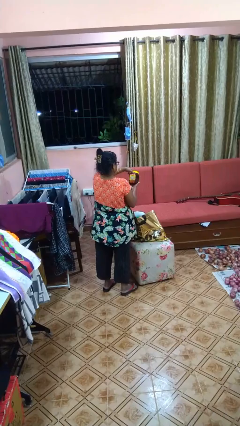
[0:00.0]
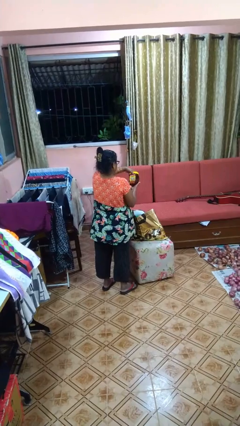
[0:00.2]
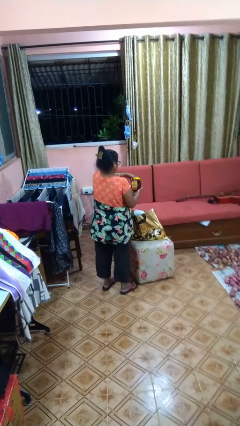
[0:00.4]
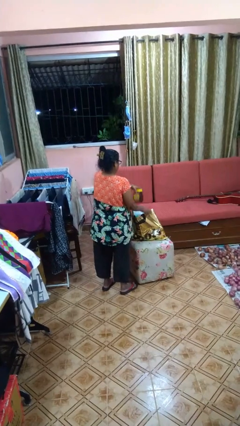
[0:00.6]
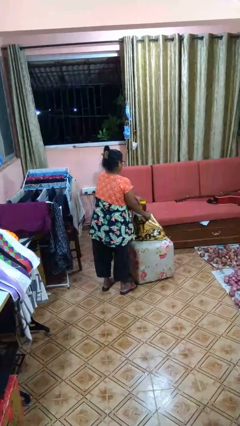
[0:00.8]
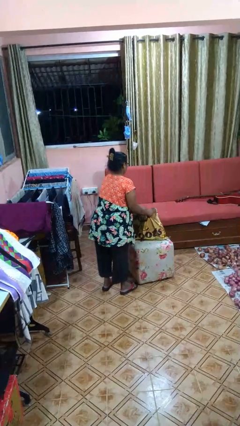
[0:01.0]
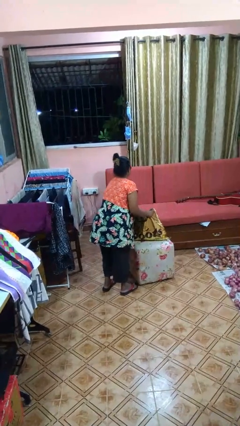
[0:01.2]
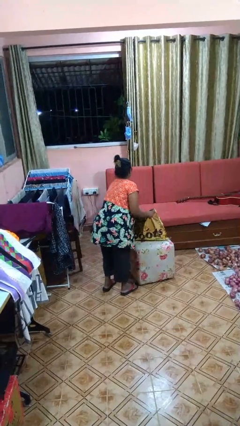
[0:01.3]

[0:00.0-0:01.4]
person puts object into bag

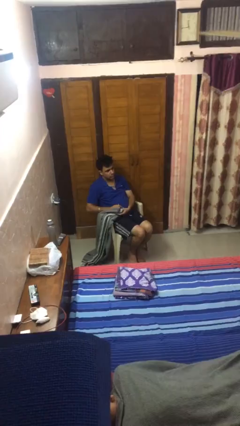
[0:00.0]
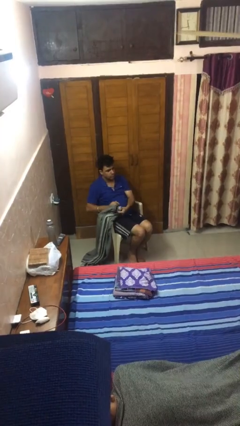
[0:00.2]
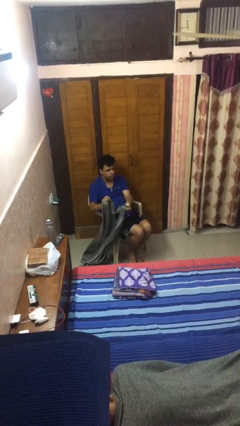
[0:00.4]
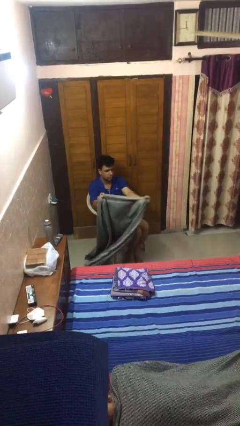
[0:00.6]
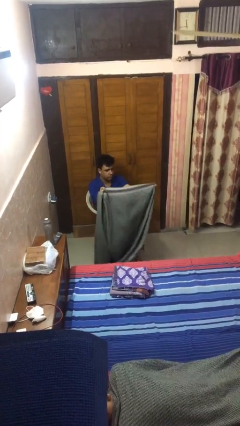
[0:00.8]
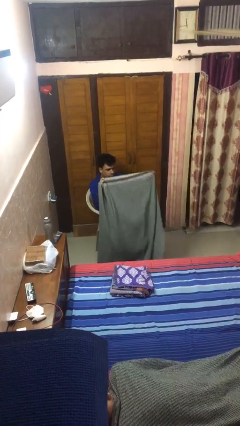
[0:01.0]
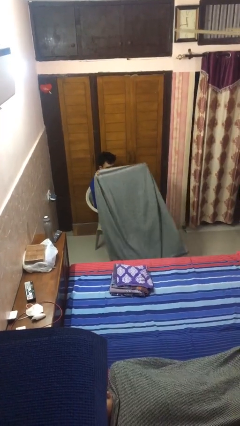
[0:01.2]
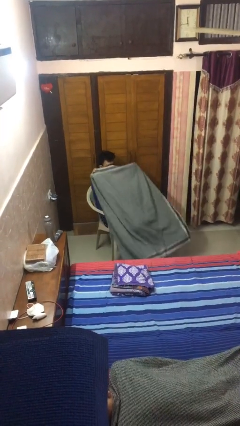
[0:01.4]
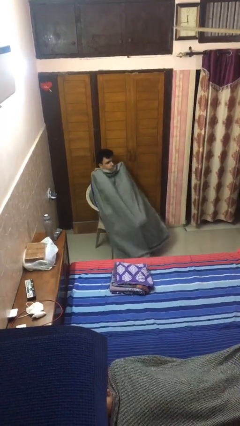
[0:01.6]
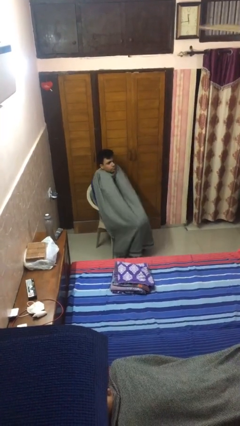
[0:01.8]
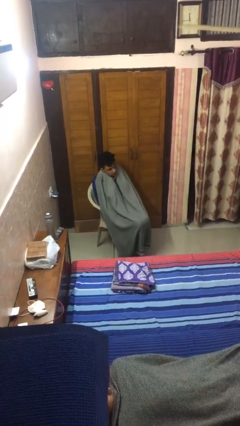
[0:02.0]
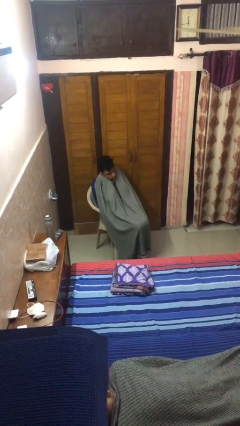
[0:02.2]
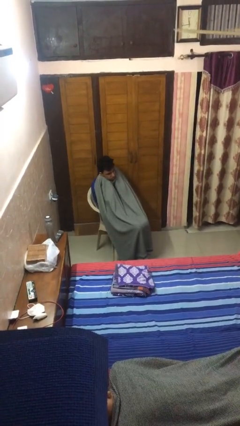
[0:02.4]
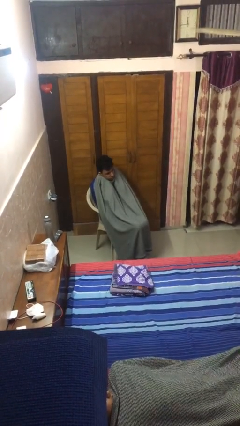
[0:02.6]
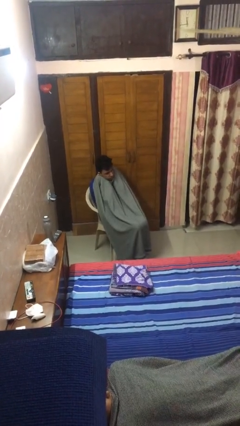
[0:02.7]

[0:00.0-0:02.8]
person covers with blanket

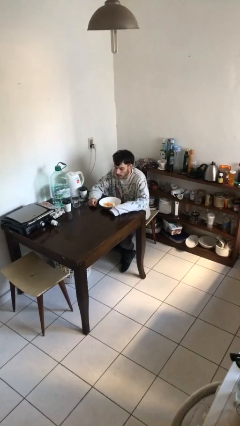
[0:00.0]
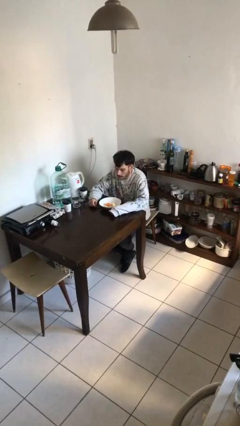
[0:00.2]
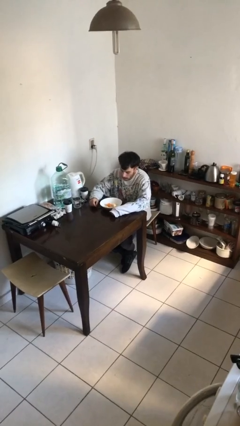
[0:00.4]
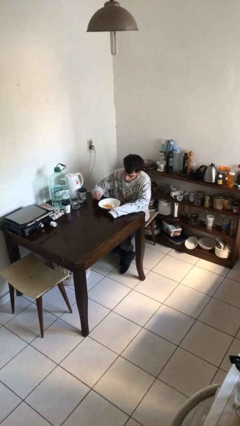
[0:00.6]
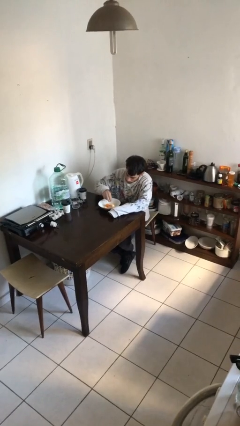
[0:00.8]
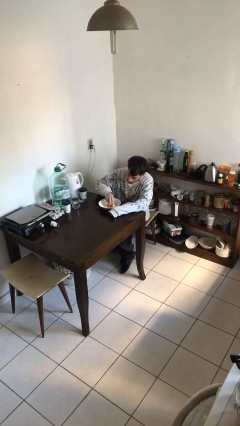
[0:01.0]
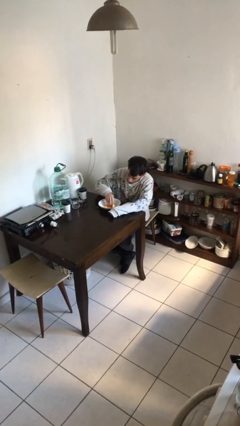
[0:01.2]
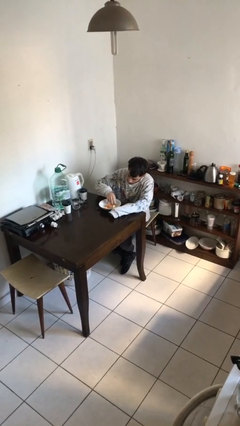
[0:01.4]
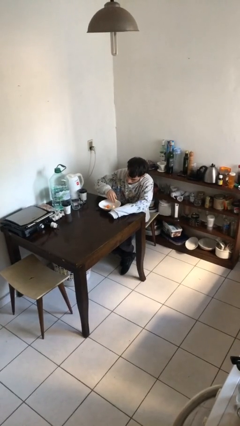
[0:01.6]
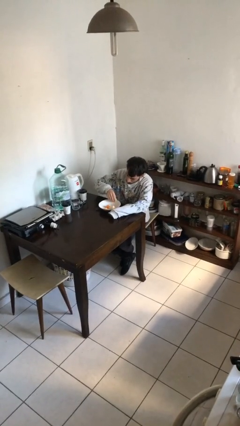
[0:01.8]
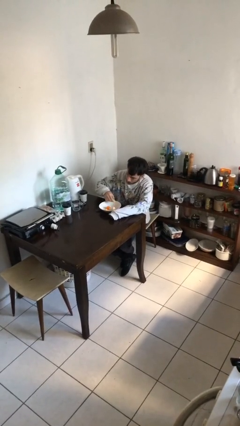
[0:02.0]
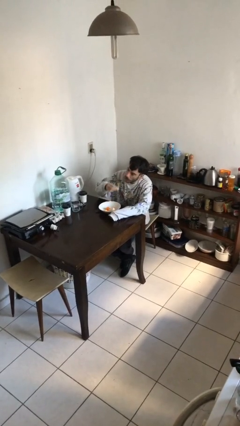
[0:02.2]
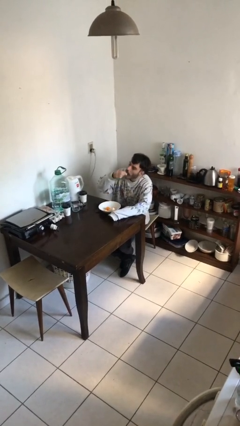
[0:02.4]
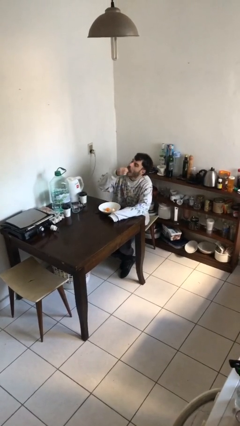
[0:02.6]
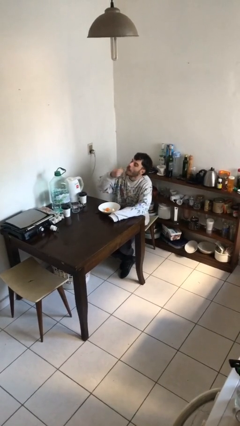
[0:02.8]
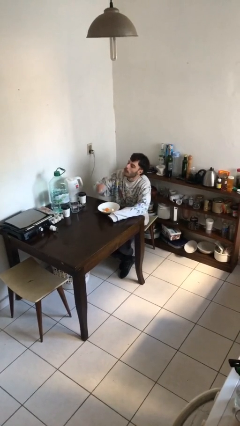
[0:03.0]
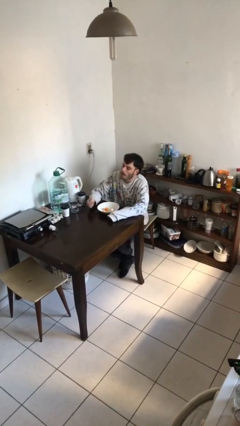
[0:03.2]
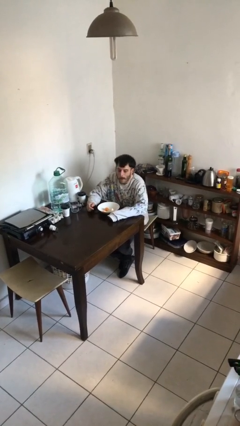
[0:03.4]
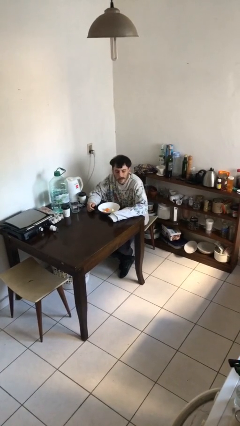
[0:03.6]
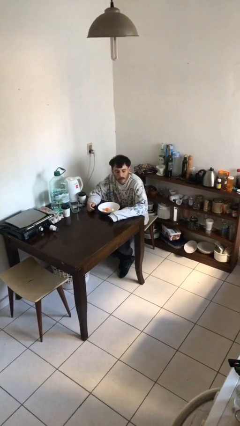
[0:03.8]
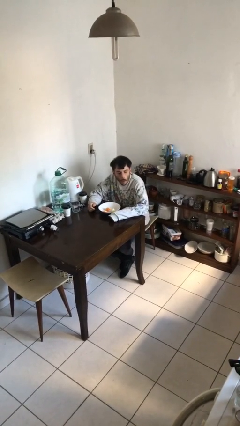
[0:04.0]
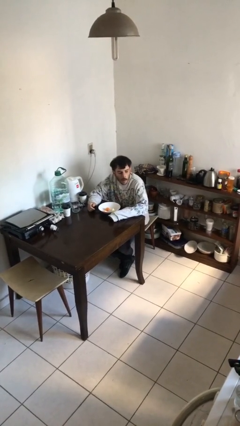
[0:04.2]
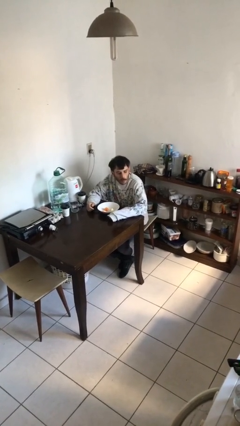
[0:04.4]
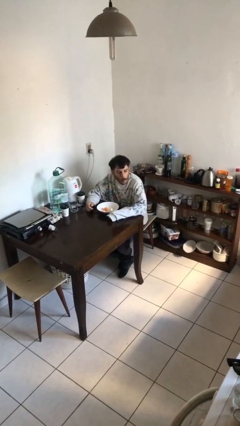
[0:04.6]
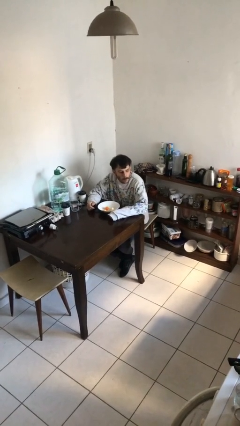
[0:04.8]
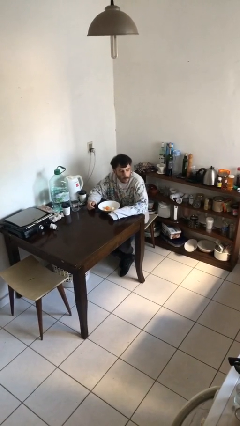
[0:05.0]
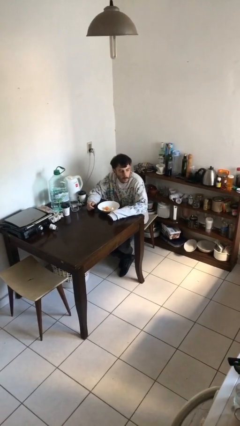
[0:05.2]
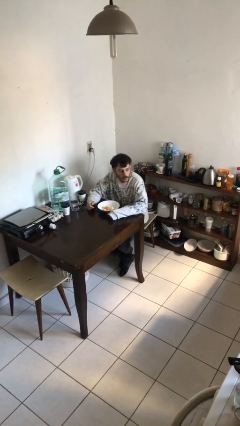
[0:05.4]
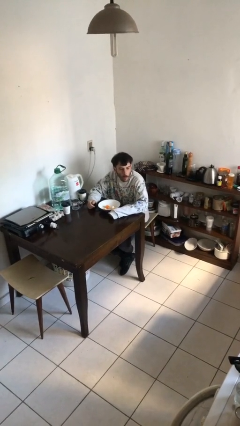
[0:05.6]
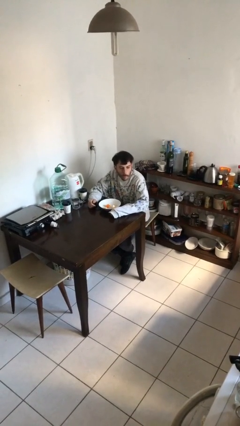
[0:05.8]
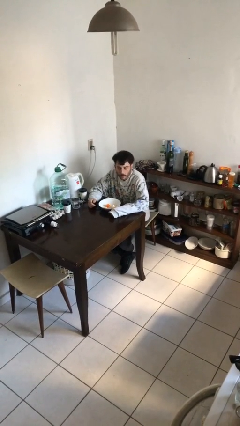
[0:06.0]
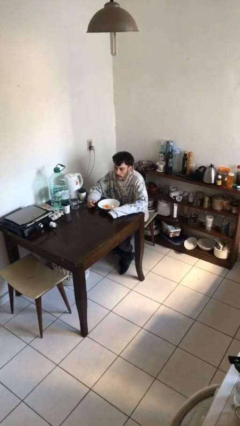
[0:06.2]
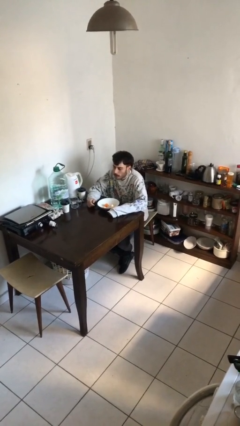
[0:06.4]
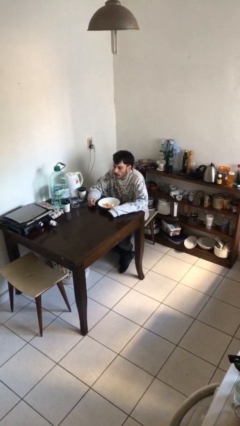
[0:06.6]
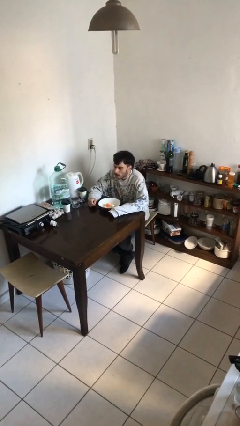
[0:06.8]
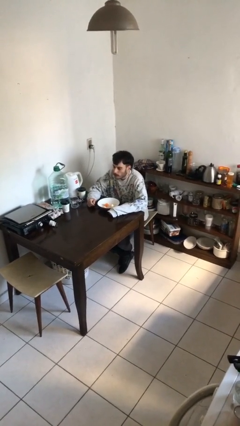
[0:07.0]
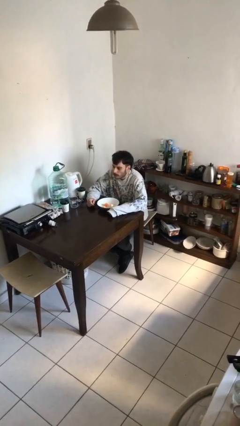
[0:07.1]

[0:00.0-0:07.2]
person eats with hands

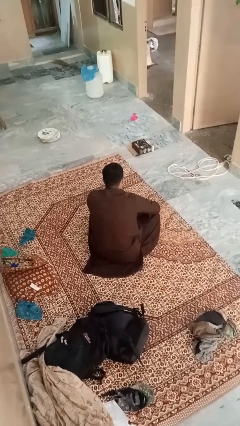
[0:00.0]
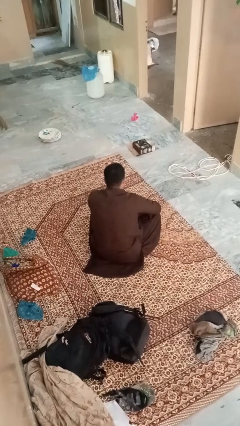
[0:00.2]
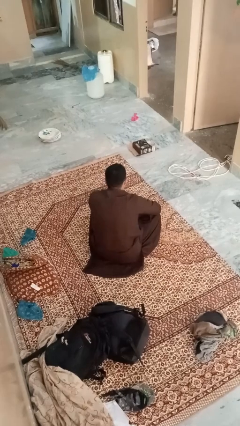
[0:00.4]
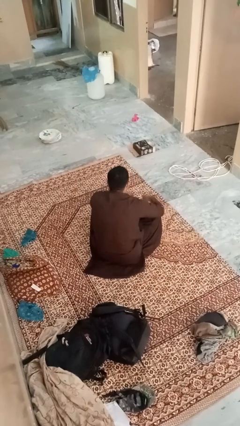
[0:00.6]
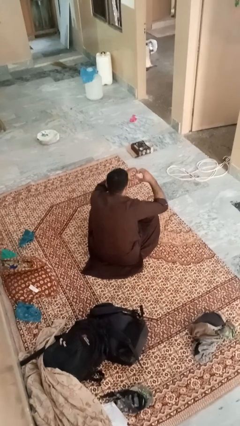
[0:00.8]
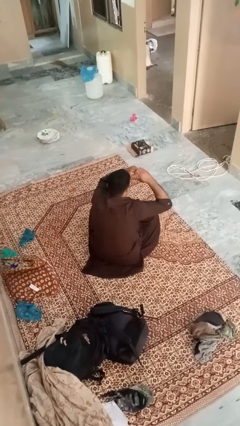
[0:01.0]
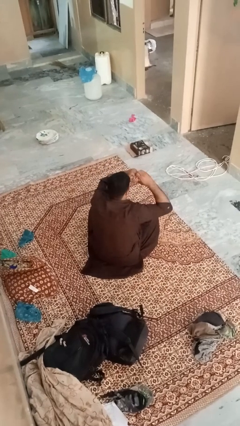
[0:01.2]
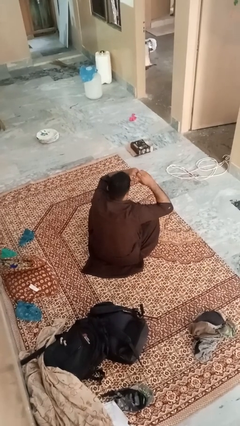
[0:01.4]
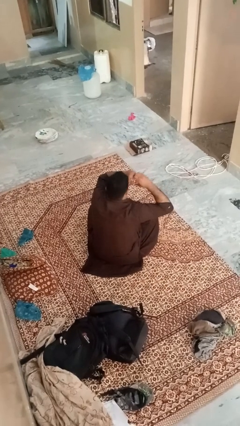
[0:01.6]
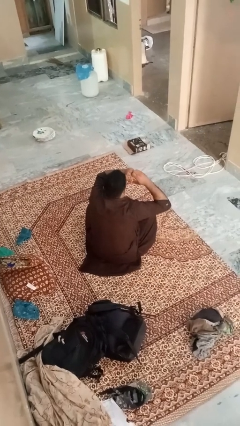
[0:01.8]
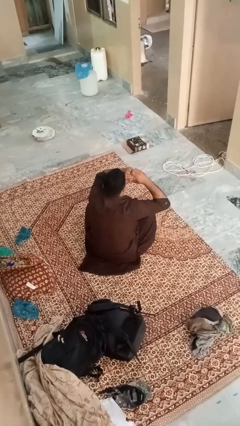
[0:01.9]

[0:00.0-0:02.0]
person gestures heart

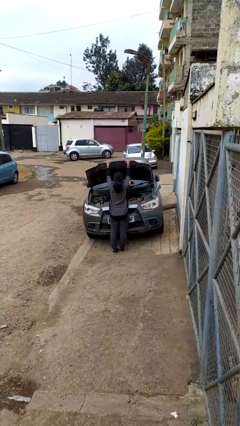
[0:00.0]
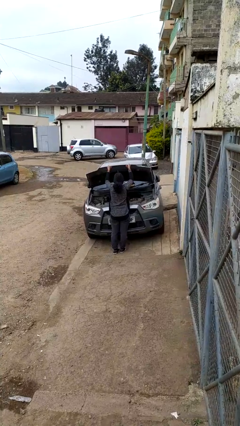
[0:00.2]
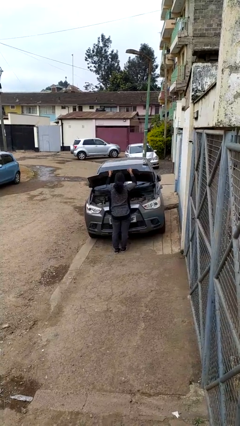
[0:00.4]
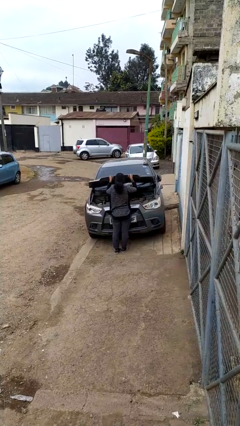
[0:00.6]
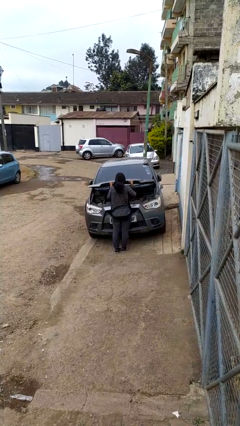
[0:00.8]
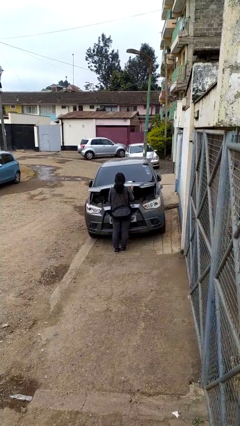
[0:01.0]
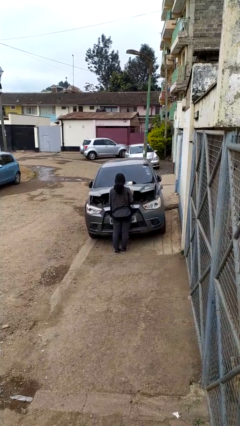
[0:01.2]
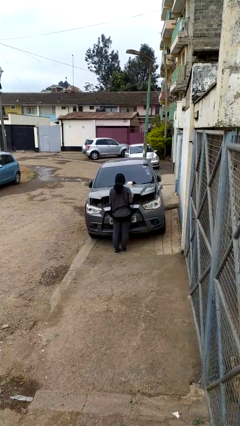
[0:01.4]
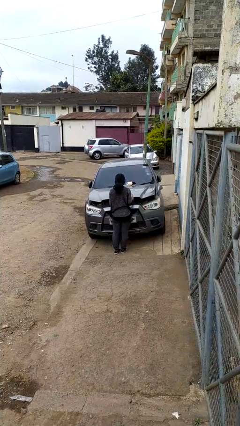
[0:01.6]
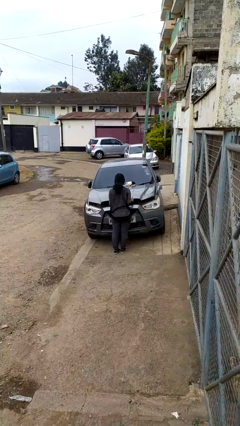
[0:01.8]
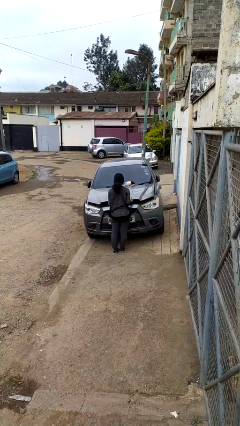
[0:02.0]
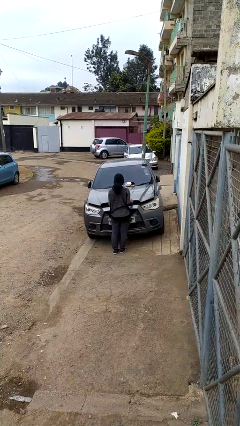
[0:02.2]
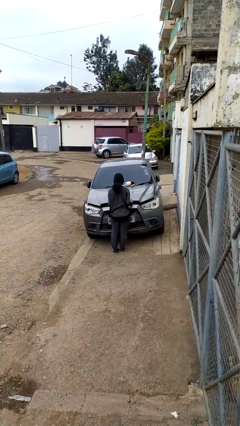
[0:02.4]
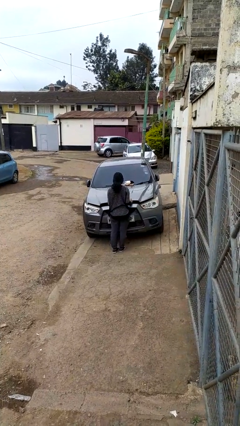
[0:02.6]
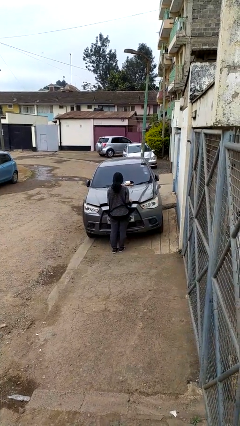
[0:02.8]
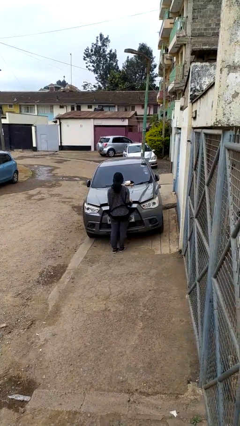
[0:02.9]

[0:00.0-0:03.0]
person closes car hood

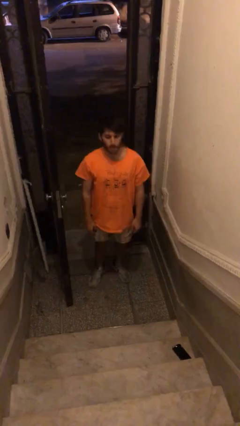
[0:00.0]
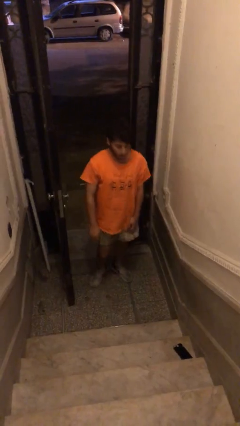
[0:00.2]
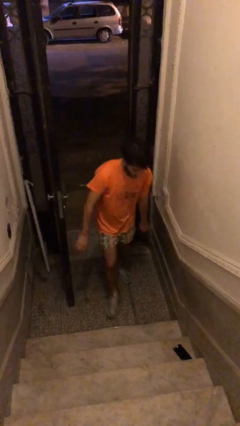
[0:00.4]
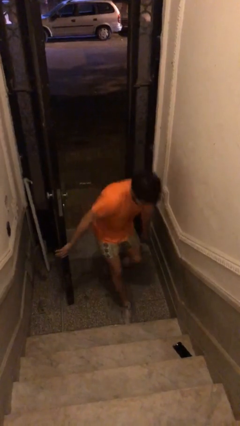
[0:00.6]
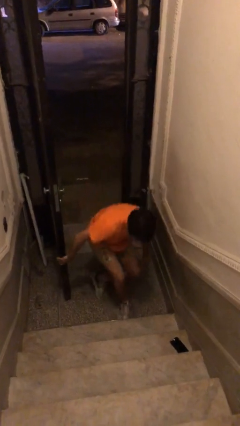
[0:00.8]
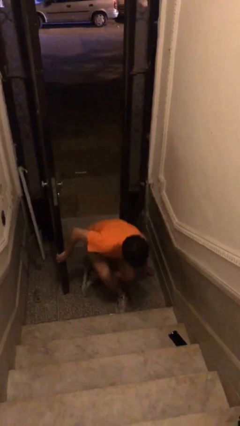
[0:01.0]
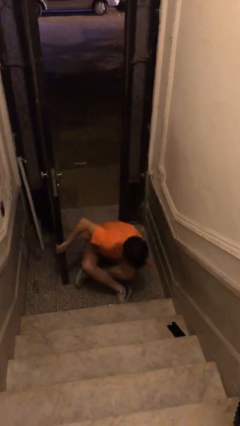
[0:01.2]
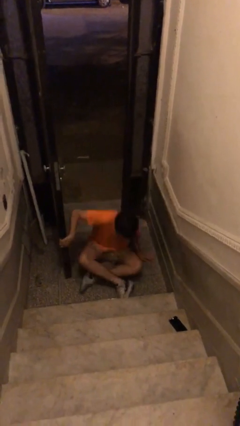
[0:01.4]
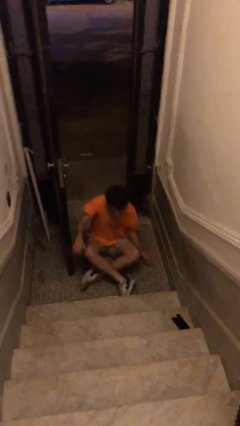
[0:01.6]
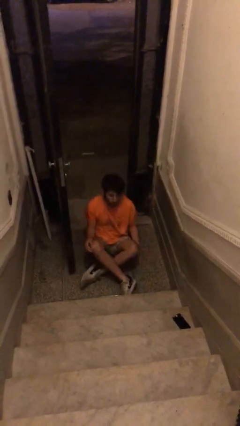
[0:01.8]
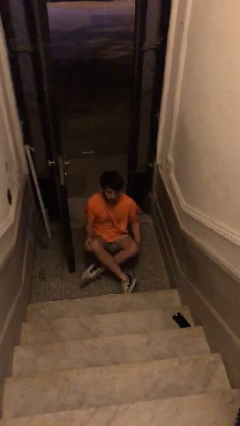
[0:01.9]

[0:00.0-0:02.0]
person sits down
